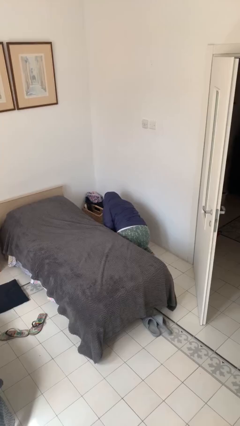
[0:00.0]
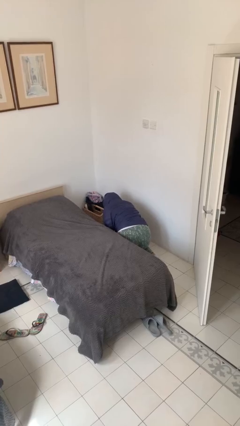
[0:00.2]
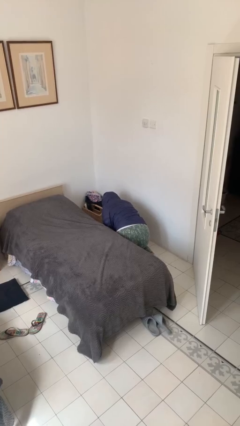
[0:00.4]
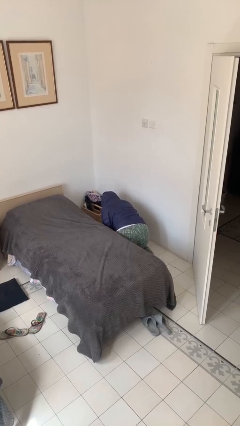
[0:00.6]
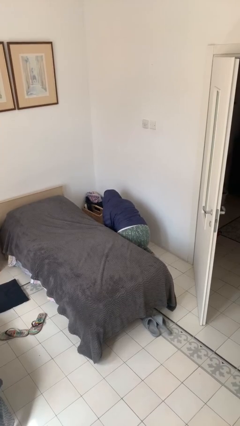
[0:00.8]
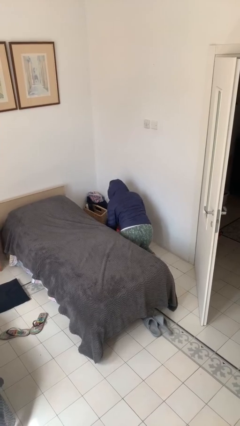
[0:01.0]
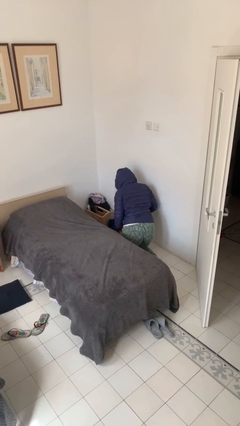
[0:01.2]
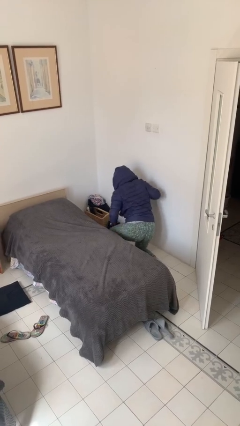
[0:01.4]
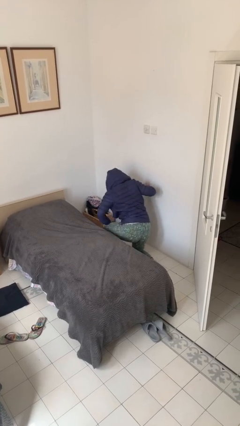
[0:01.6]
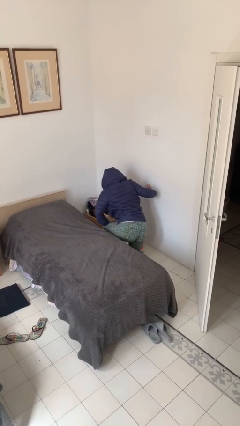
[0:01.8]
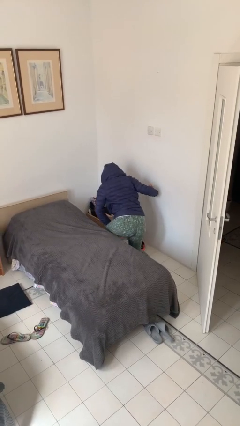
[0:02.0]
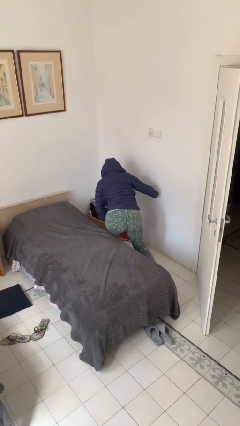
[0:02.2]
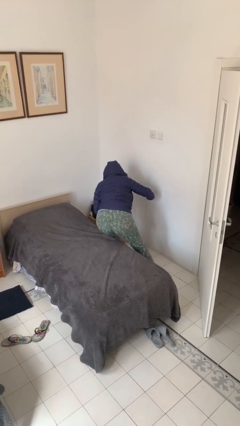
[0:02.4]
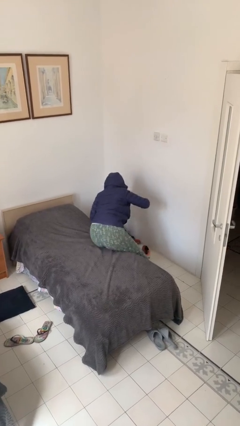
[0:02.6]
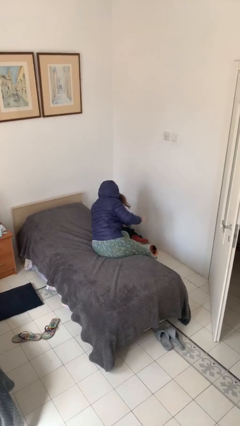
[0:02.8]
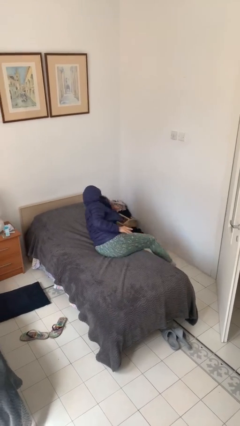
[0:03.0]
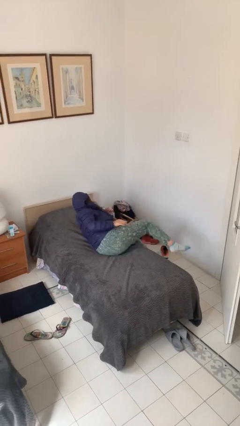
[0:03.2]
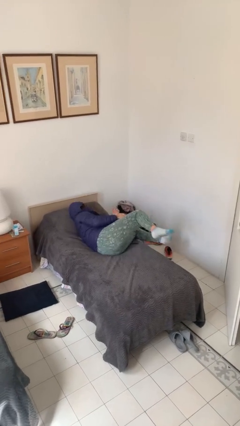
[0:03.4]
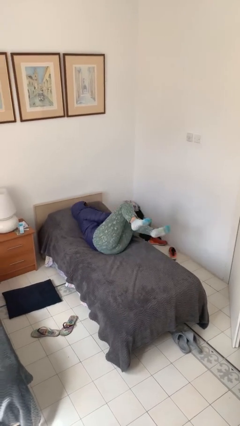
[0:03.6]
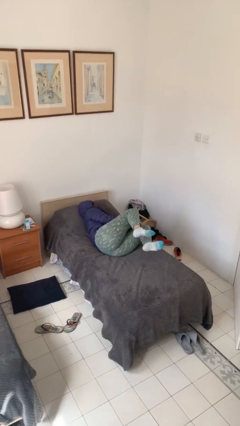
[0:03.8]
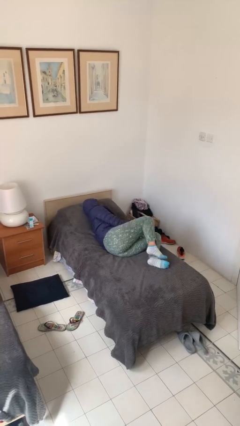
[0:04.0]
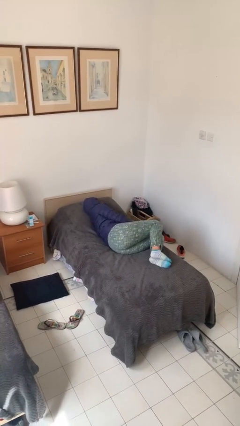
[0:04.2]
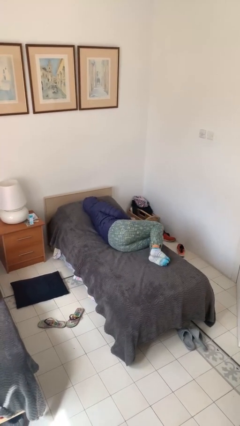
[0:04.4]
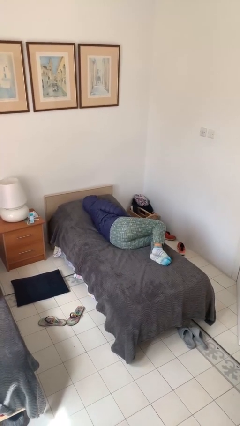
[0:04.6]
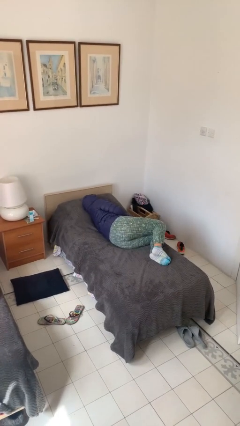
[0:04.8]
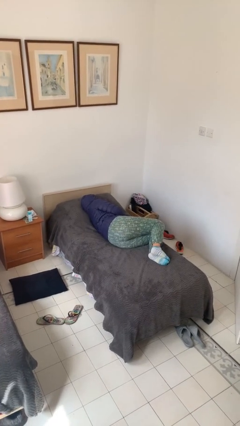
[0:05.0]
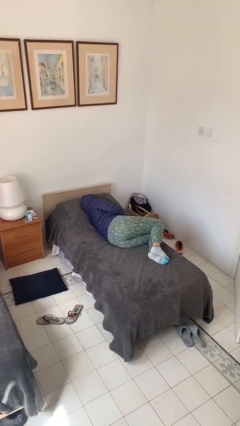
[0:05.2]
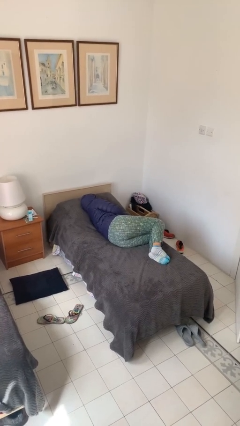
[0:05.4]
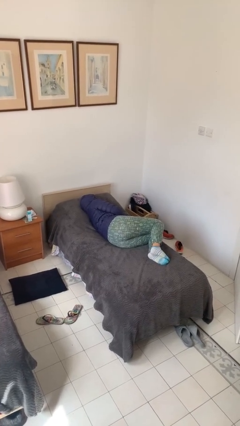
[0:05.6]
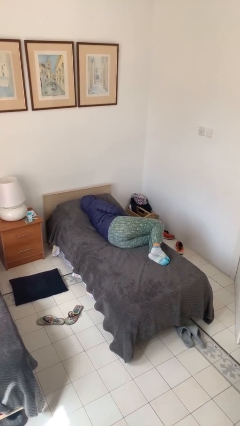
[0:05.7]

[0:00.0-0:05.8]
person lies down on bed

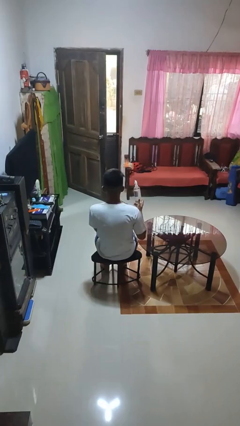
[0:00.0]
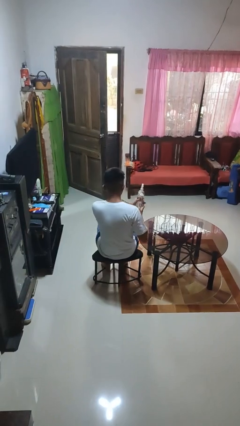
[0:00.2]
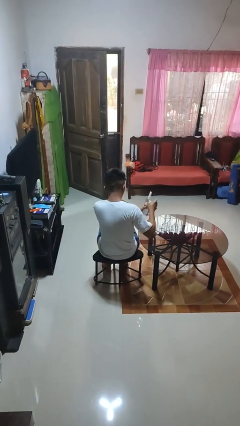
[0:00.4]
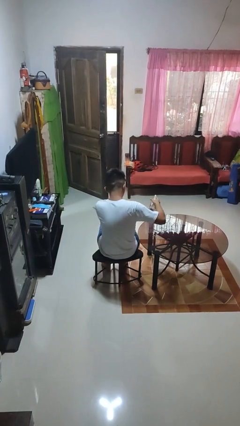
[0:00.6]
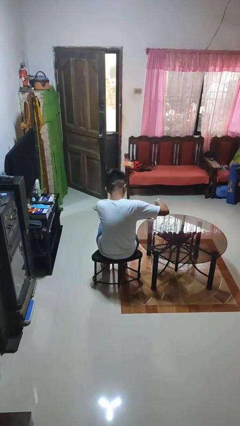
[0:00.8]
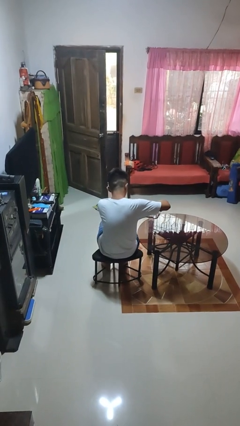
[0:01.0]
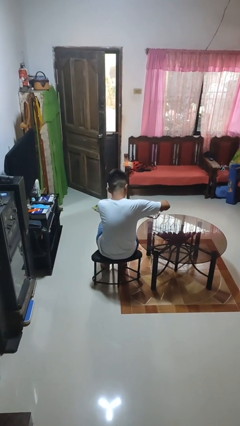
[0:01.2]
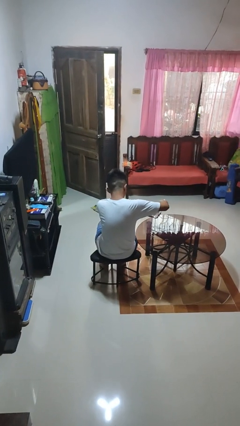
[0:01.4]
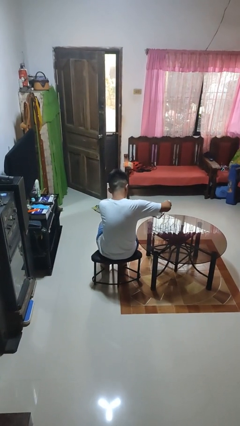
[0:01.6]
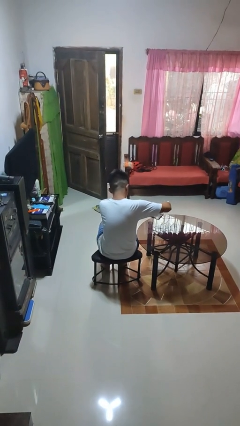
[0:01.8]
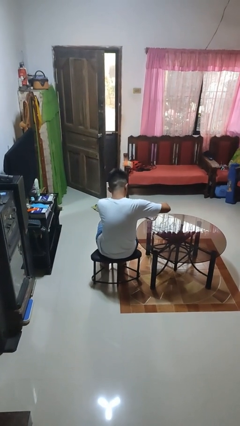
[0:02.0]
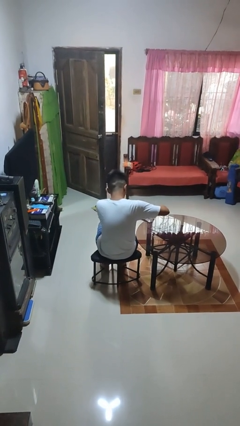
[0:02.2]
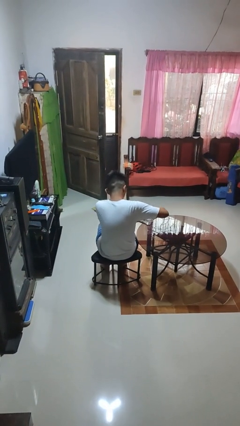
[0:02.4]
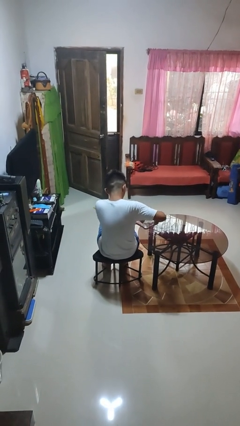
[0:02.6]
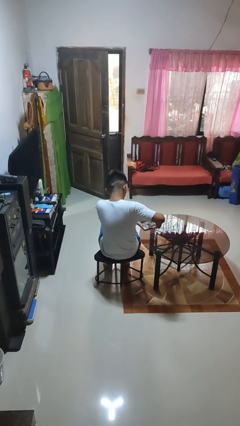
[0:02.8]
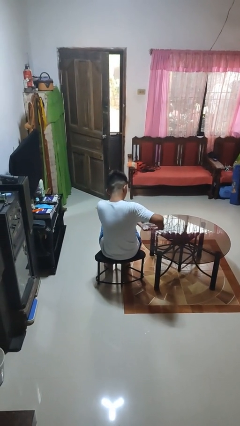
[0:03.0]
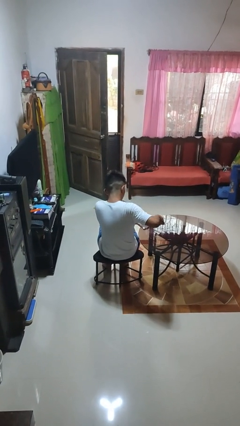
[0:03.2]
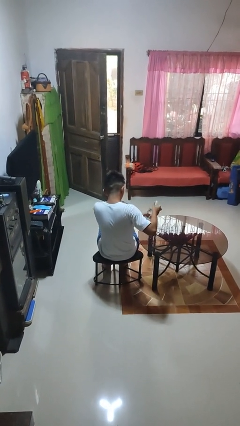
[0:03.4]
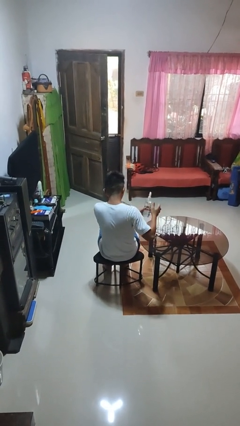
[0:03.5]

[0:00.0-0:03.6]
person sprays from bottle

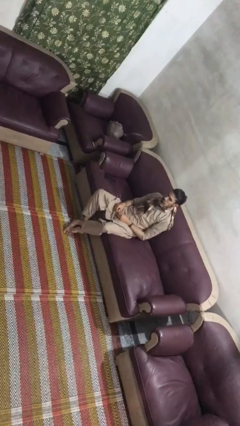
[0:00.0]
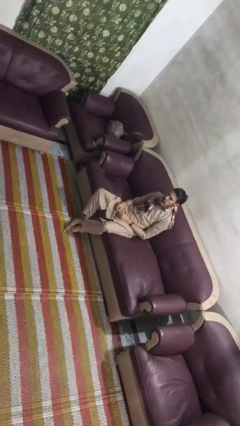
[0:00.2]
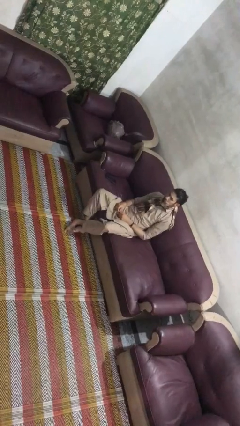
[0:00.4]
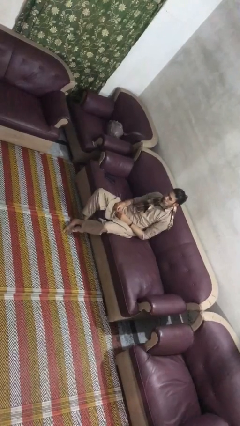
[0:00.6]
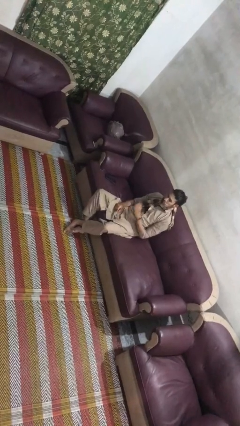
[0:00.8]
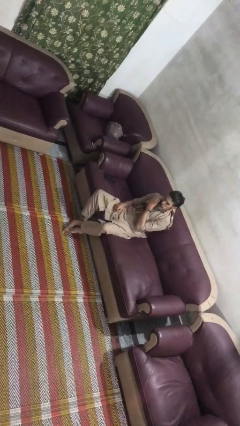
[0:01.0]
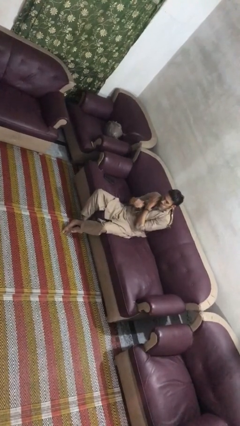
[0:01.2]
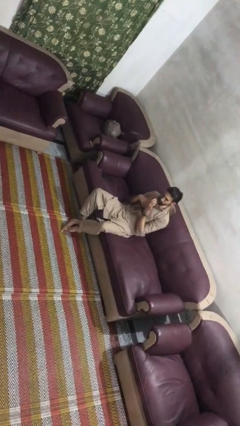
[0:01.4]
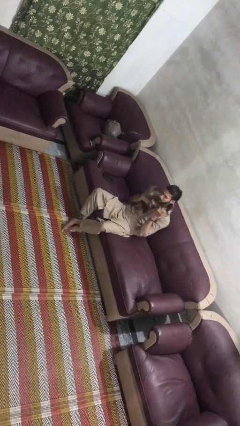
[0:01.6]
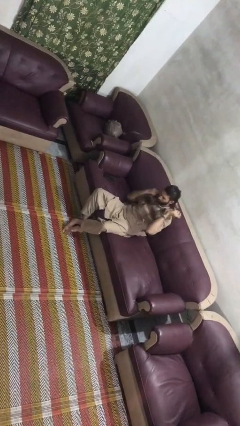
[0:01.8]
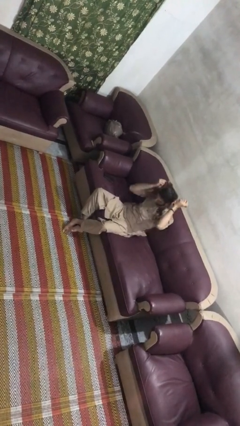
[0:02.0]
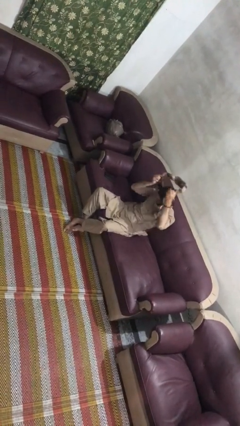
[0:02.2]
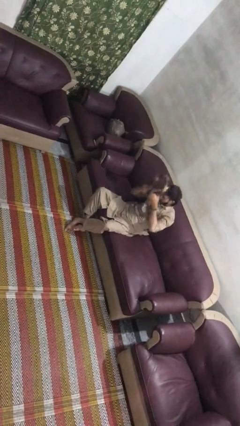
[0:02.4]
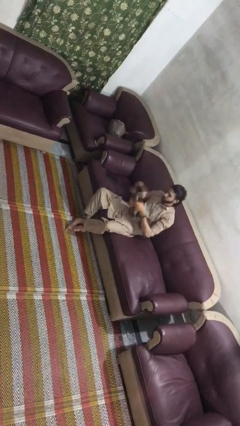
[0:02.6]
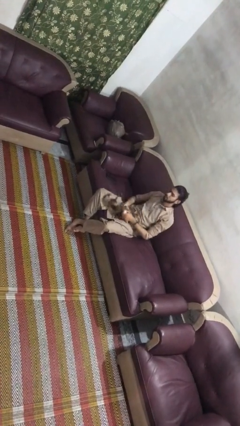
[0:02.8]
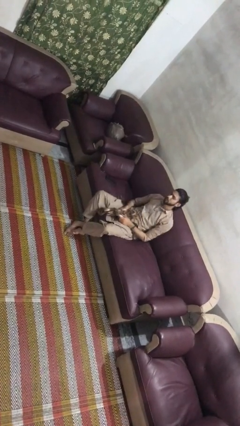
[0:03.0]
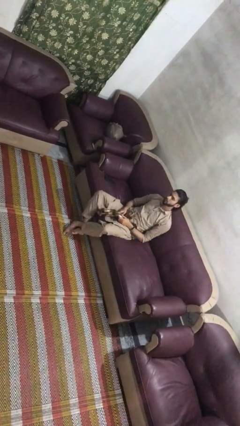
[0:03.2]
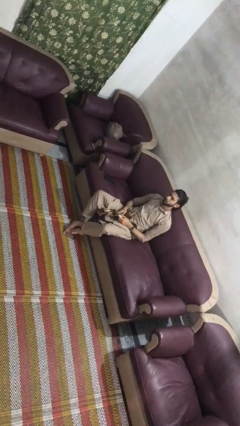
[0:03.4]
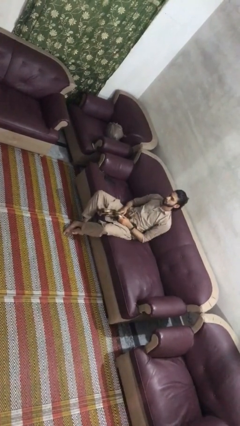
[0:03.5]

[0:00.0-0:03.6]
person takes off scarf

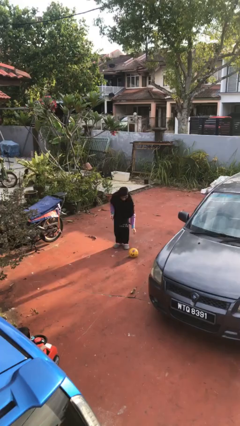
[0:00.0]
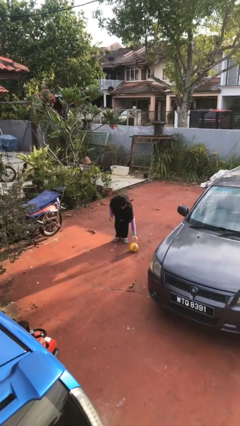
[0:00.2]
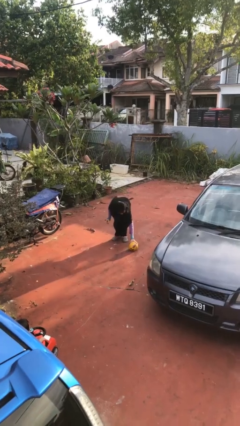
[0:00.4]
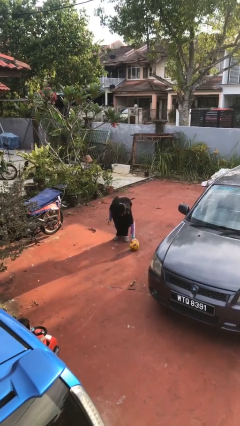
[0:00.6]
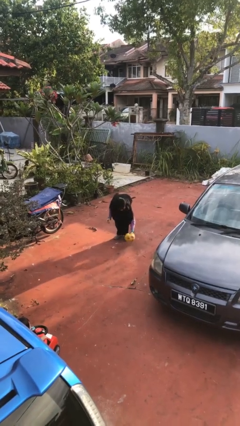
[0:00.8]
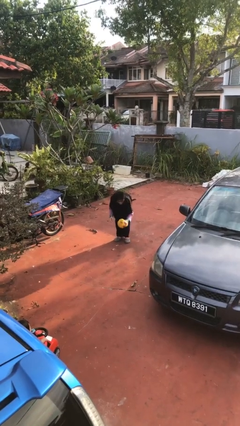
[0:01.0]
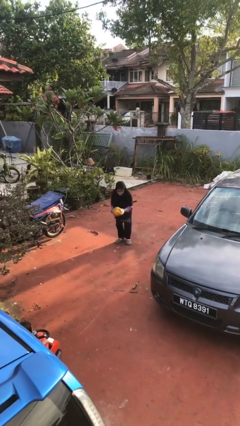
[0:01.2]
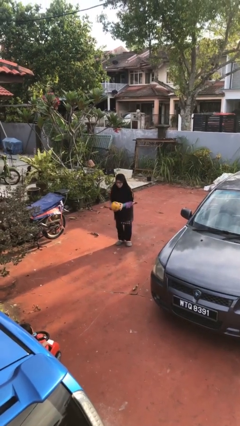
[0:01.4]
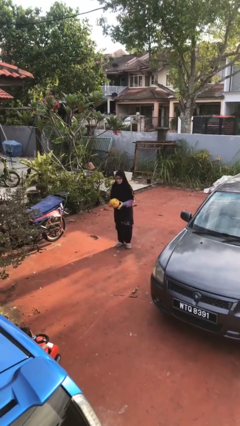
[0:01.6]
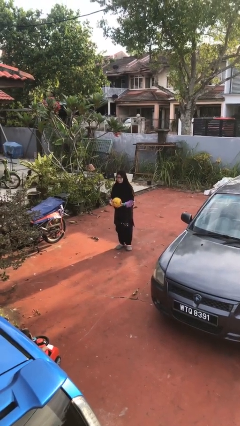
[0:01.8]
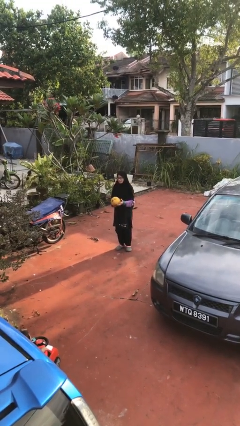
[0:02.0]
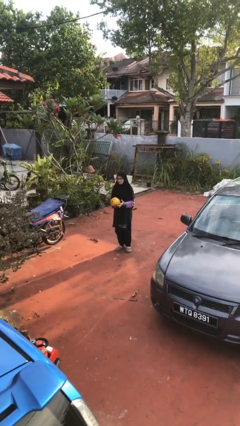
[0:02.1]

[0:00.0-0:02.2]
person picks up object from floor

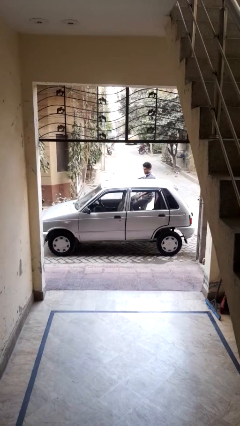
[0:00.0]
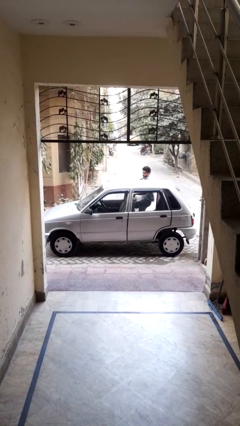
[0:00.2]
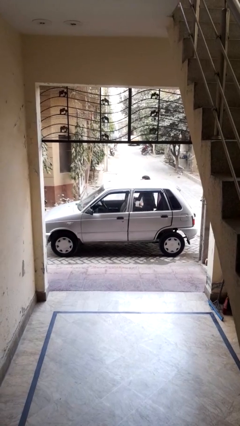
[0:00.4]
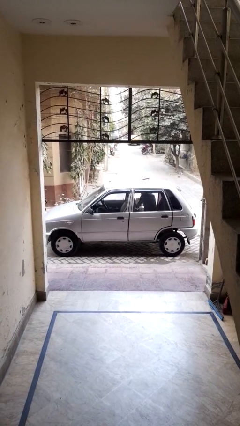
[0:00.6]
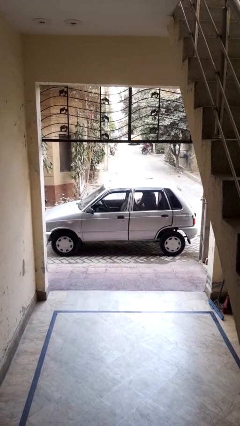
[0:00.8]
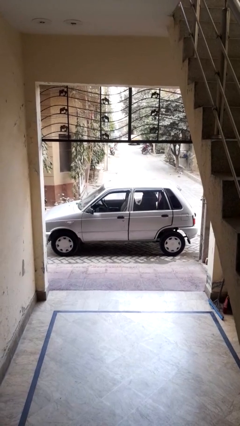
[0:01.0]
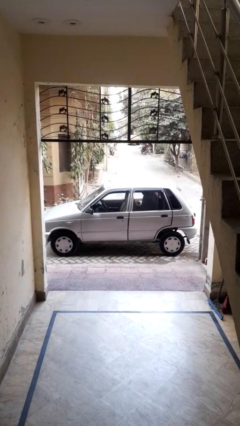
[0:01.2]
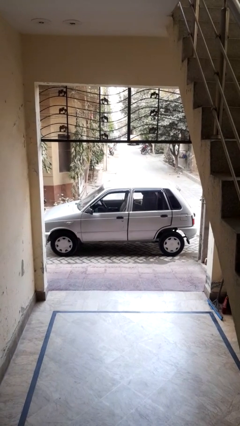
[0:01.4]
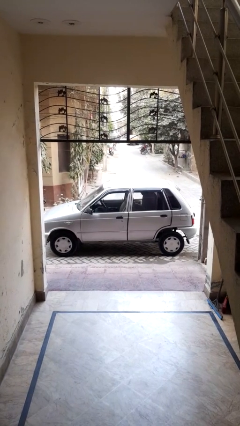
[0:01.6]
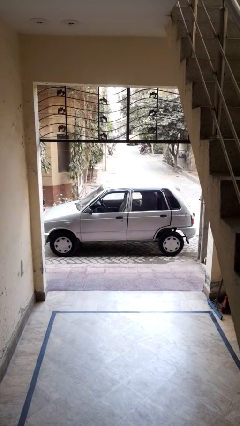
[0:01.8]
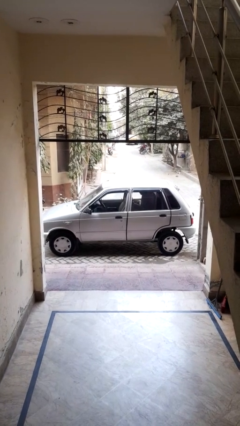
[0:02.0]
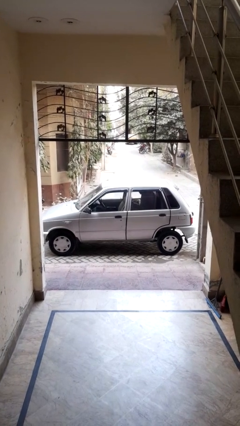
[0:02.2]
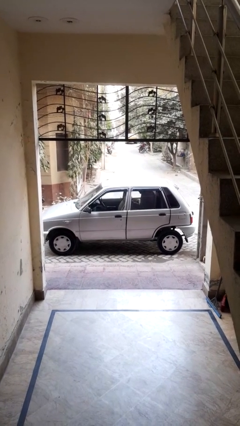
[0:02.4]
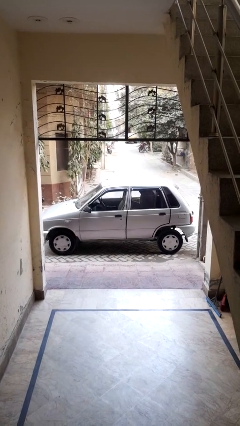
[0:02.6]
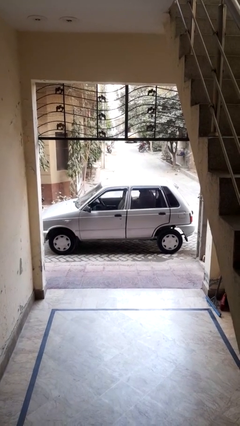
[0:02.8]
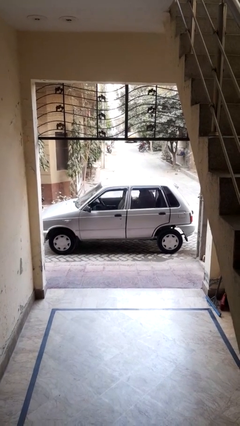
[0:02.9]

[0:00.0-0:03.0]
car picks up person
